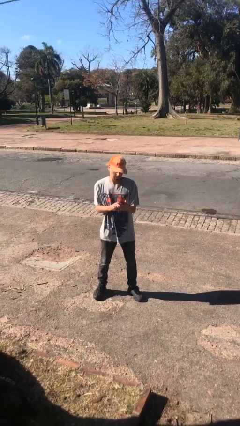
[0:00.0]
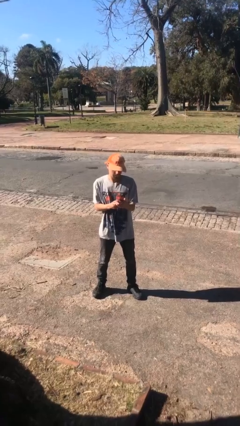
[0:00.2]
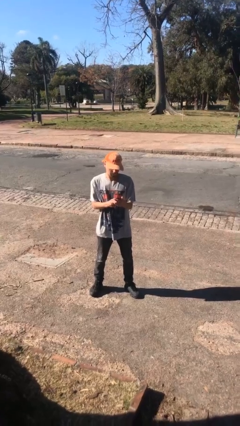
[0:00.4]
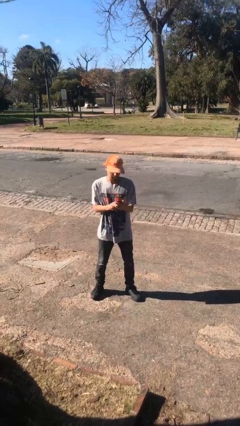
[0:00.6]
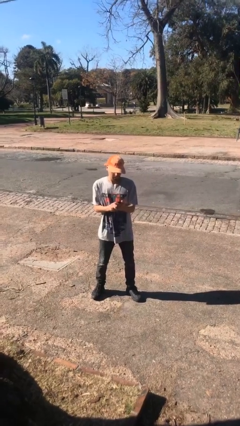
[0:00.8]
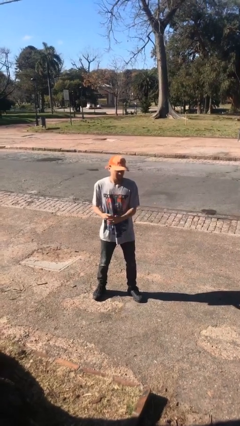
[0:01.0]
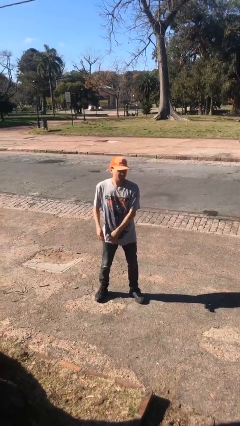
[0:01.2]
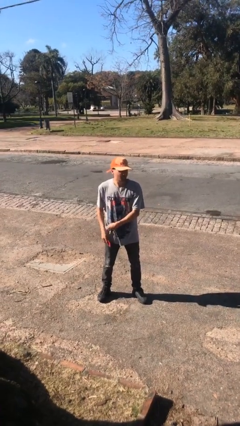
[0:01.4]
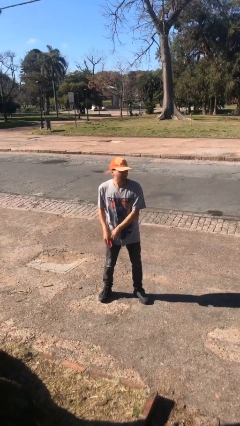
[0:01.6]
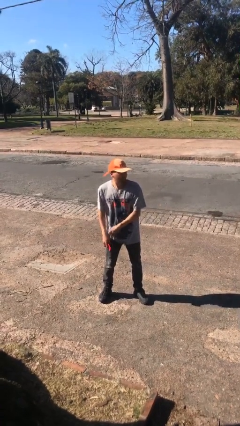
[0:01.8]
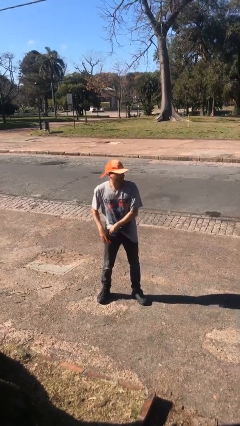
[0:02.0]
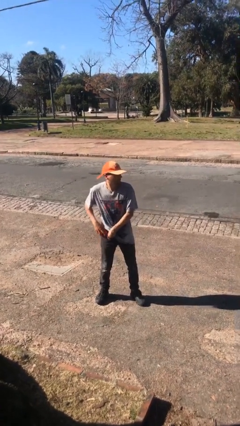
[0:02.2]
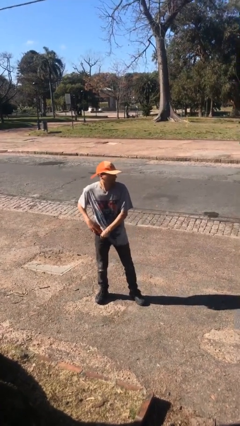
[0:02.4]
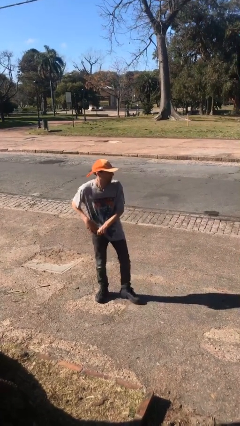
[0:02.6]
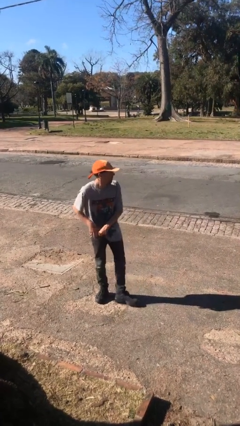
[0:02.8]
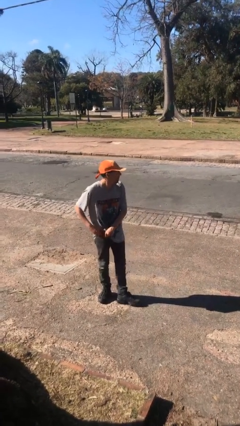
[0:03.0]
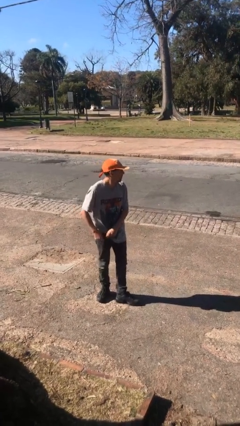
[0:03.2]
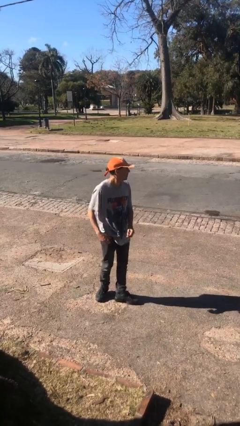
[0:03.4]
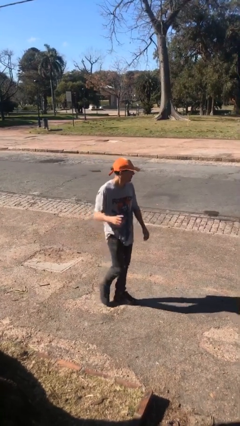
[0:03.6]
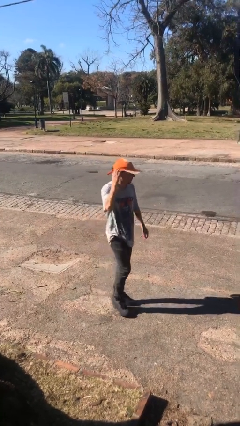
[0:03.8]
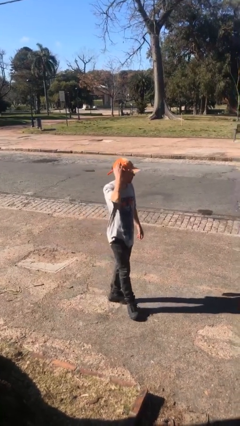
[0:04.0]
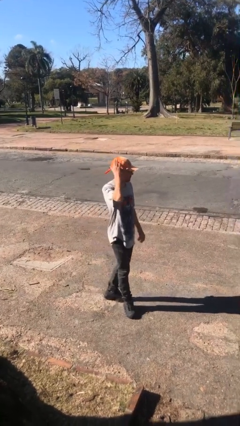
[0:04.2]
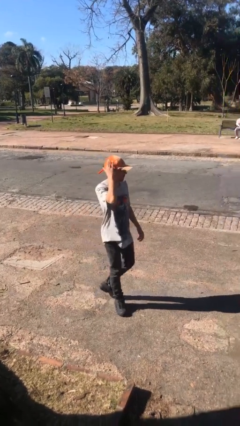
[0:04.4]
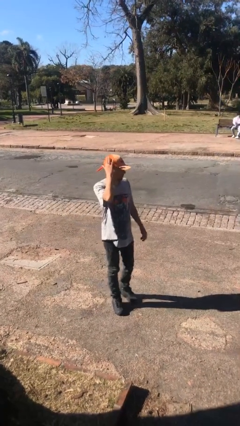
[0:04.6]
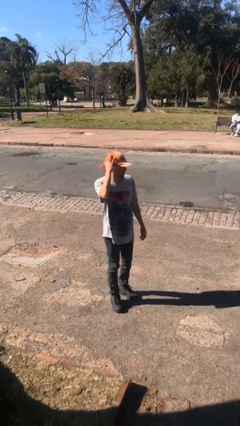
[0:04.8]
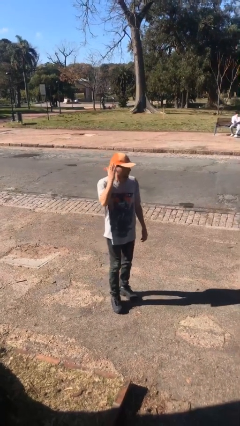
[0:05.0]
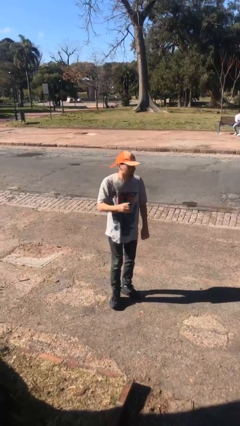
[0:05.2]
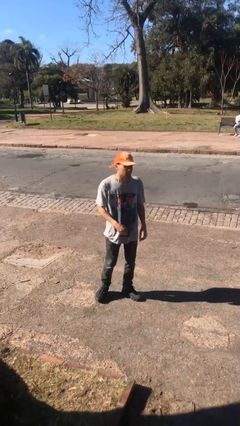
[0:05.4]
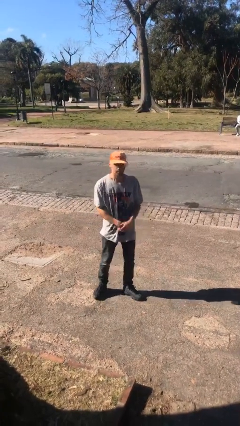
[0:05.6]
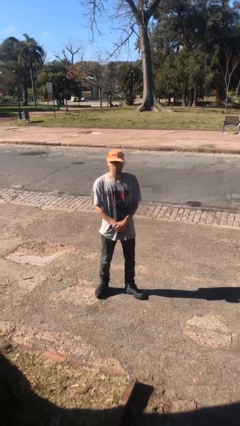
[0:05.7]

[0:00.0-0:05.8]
person puts phone into pocket

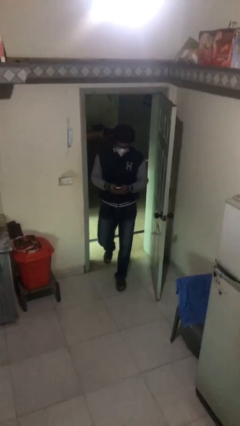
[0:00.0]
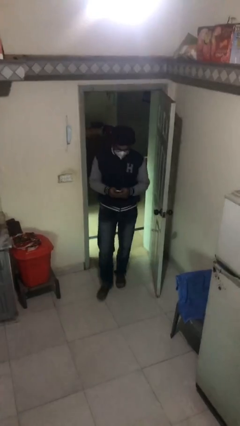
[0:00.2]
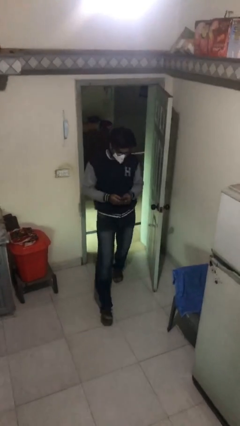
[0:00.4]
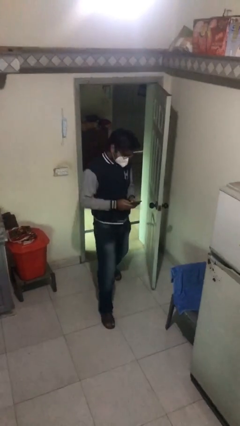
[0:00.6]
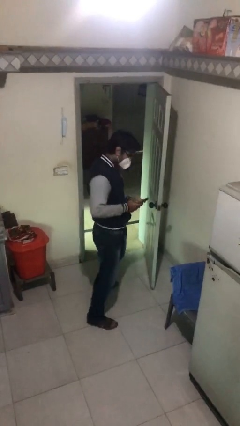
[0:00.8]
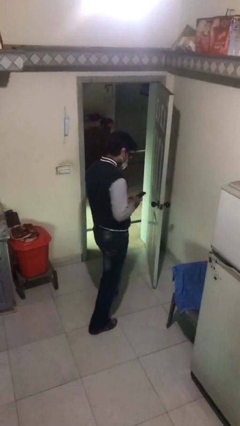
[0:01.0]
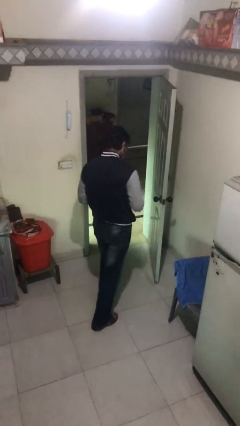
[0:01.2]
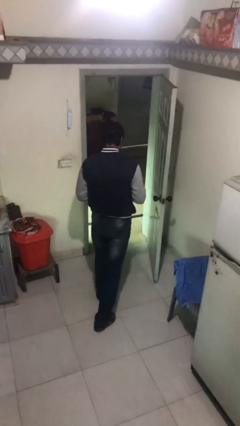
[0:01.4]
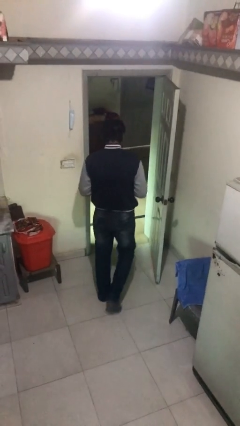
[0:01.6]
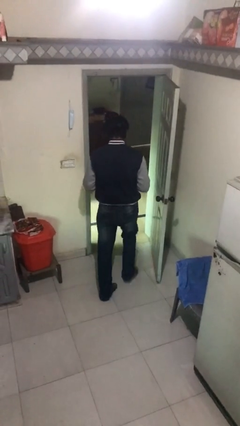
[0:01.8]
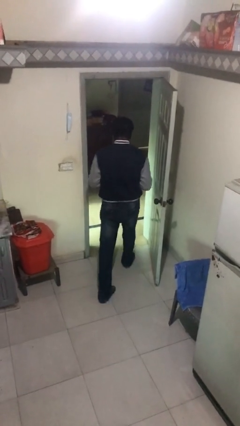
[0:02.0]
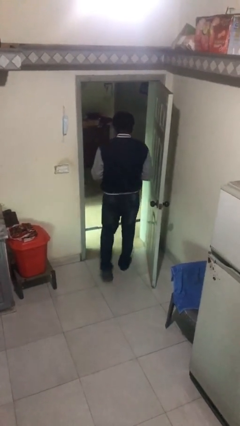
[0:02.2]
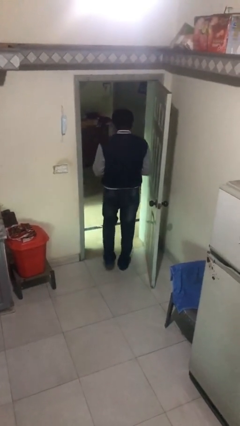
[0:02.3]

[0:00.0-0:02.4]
person exits scene through structure

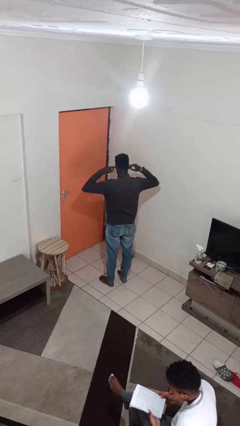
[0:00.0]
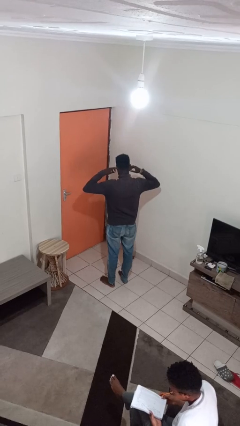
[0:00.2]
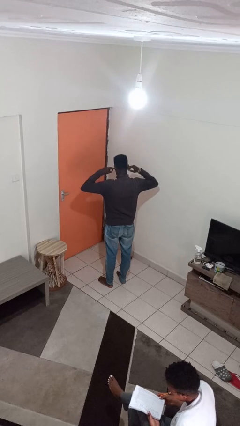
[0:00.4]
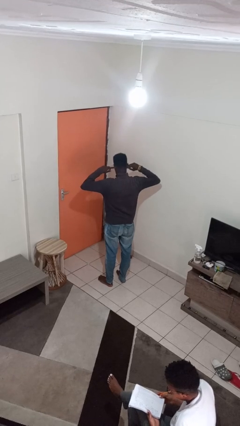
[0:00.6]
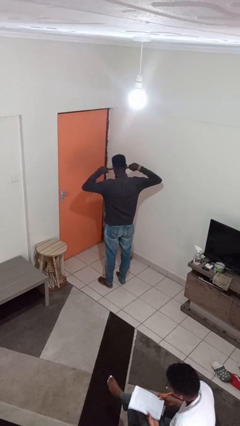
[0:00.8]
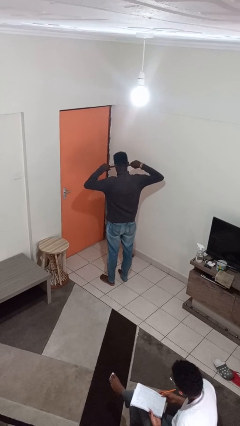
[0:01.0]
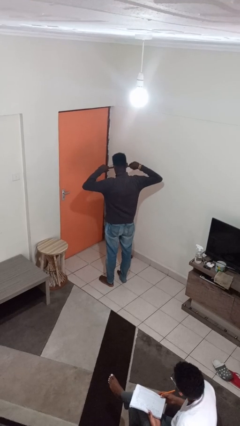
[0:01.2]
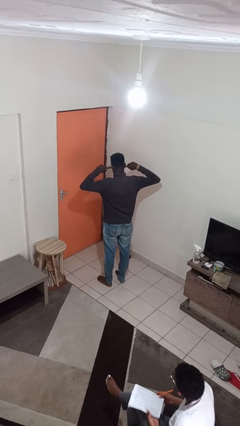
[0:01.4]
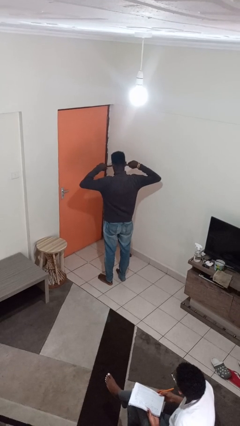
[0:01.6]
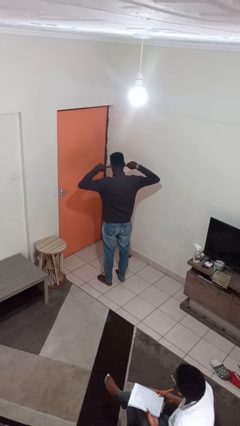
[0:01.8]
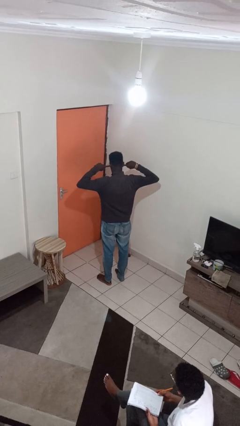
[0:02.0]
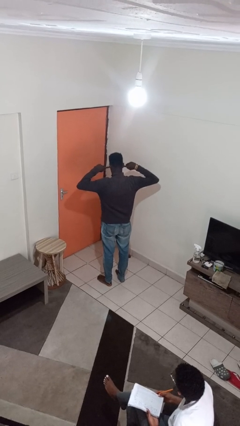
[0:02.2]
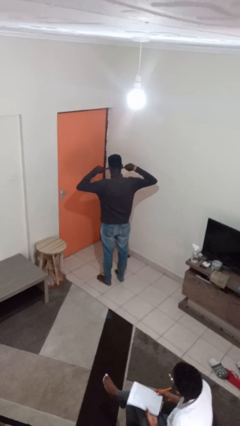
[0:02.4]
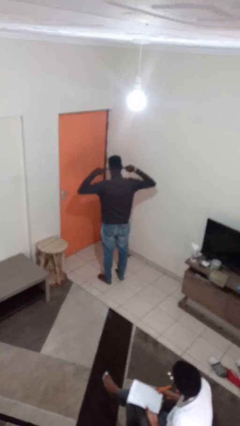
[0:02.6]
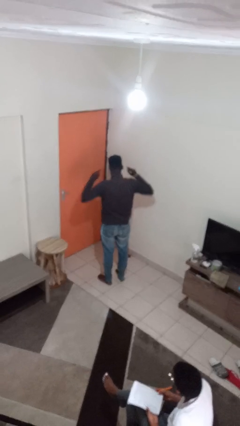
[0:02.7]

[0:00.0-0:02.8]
person puts fingers in ear

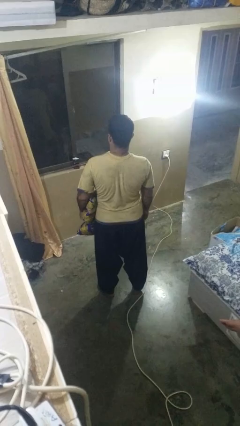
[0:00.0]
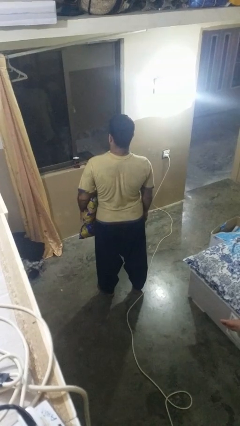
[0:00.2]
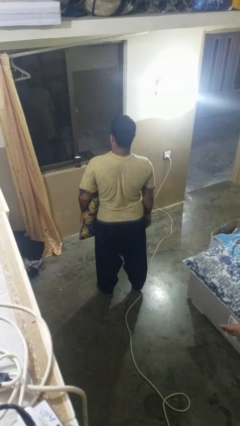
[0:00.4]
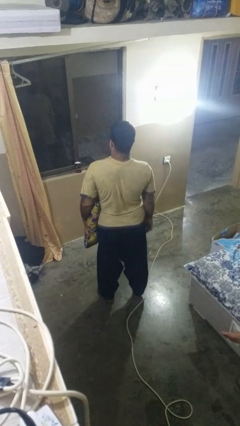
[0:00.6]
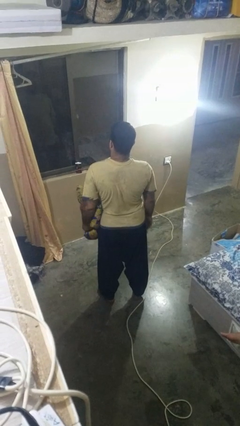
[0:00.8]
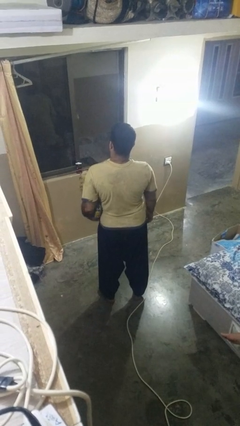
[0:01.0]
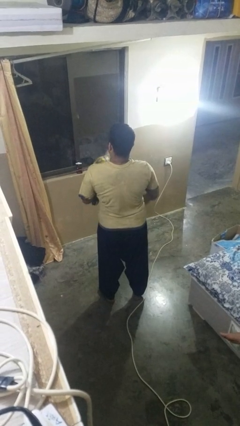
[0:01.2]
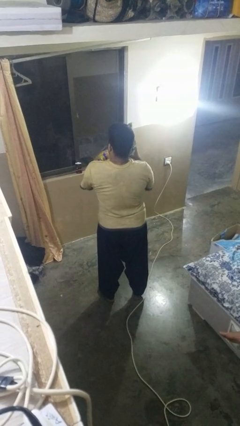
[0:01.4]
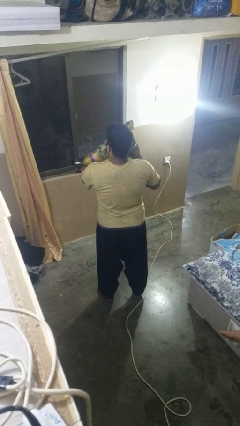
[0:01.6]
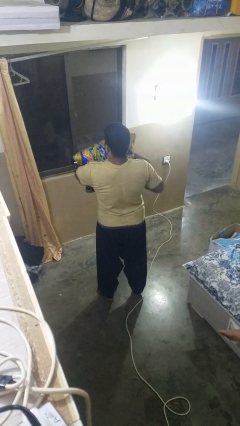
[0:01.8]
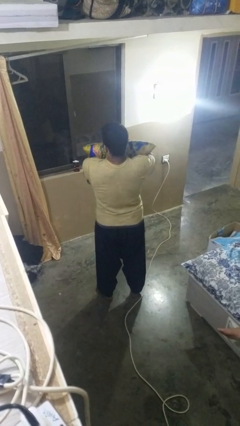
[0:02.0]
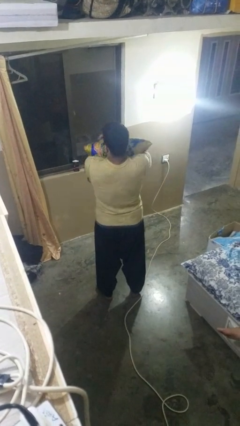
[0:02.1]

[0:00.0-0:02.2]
person squeezes object

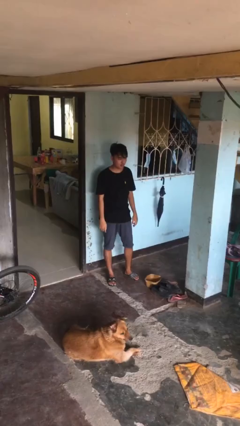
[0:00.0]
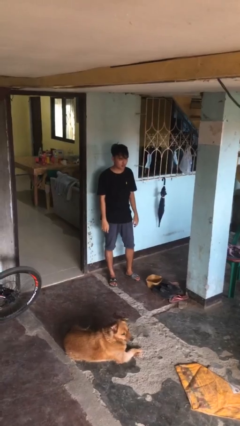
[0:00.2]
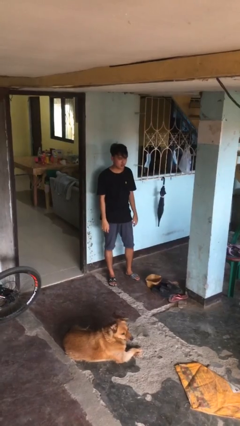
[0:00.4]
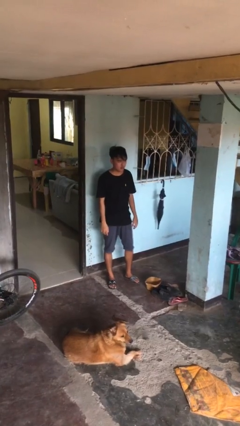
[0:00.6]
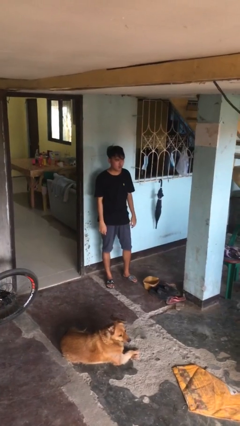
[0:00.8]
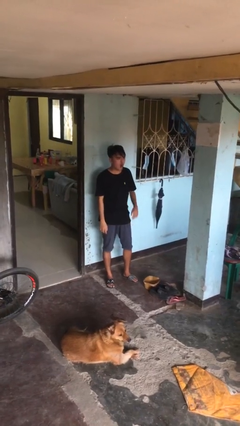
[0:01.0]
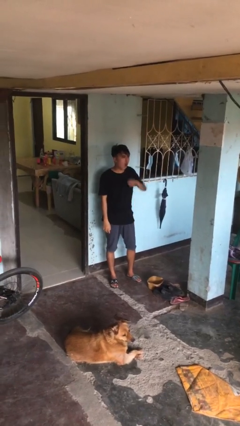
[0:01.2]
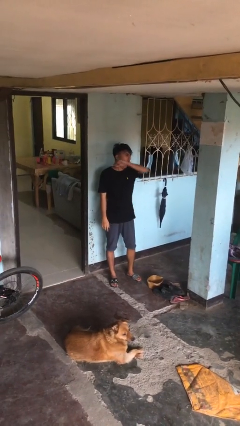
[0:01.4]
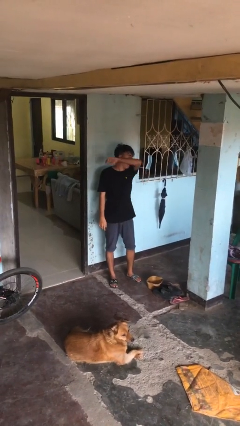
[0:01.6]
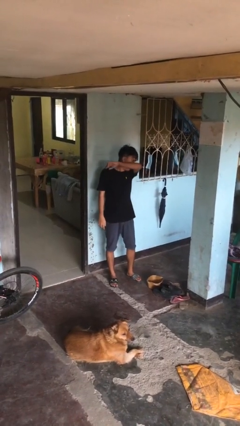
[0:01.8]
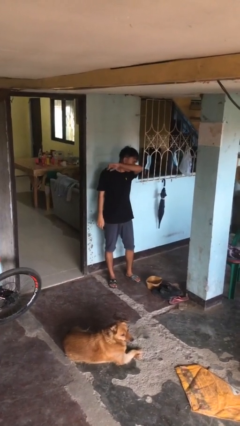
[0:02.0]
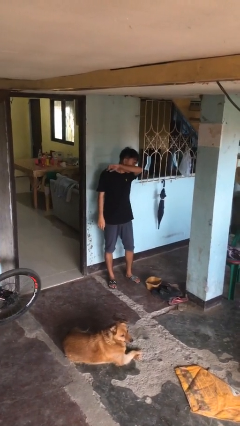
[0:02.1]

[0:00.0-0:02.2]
person sneezes into arm

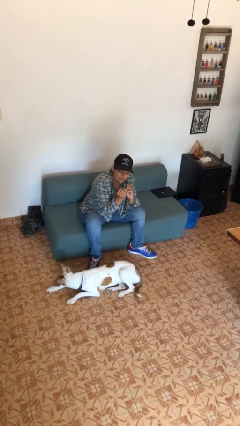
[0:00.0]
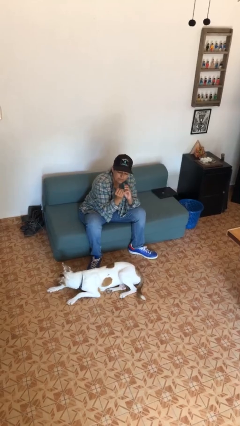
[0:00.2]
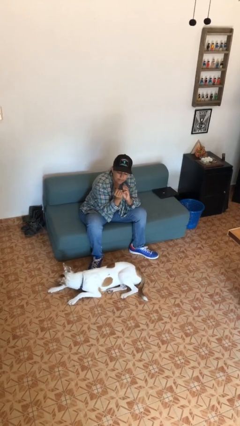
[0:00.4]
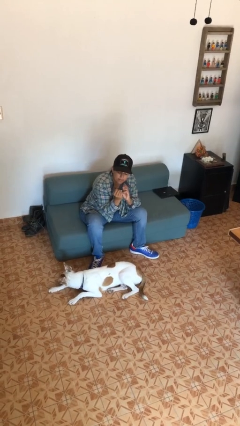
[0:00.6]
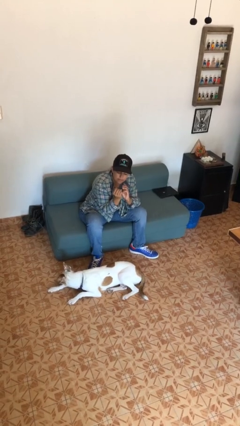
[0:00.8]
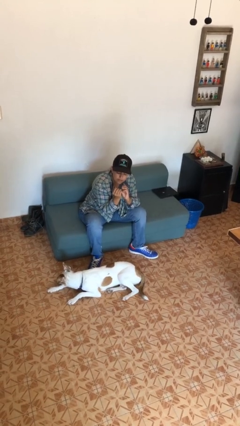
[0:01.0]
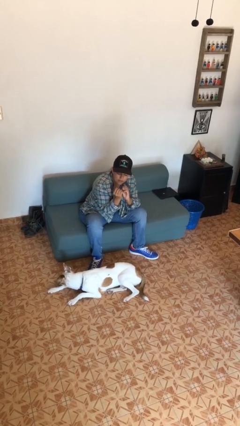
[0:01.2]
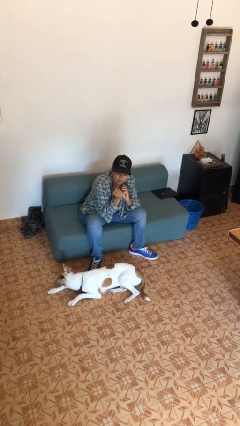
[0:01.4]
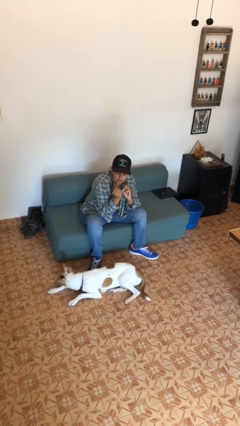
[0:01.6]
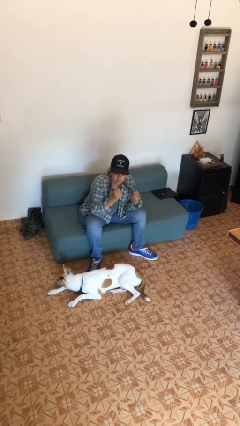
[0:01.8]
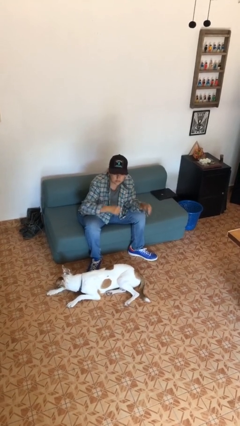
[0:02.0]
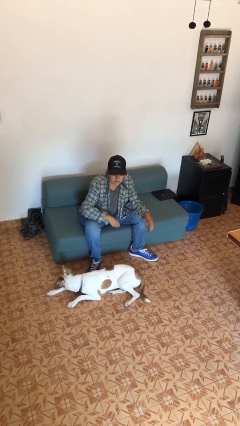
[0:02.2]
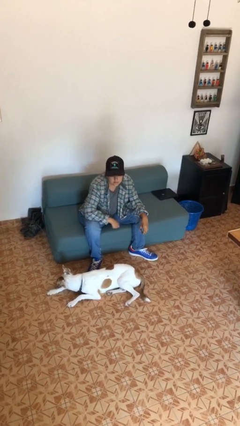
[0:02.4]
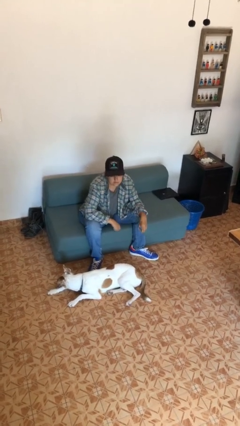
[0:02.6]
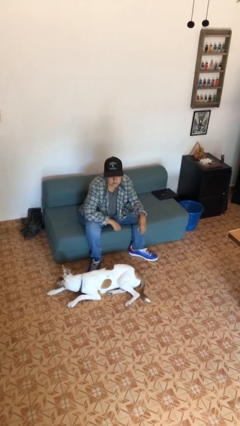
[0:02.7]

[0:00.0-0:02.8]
person clips fingernails
